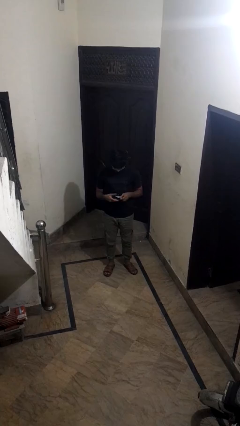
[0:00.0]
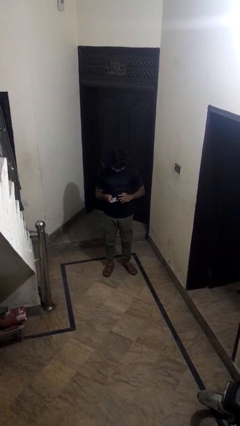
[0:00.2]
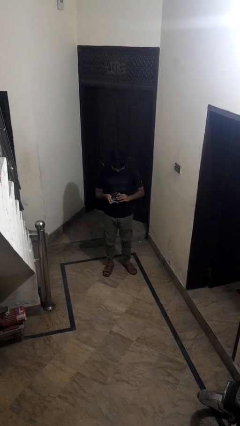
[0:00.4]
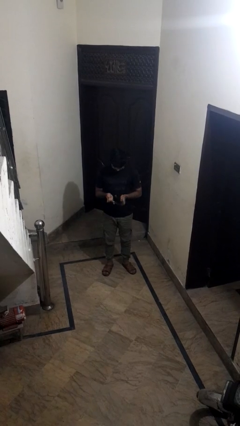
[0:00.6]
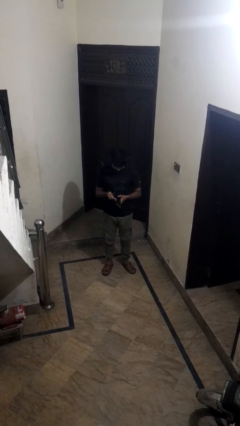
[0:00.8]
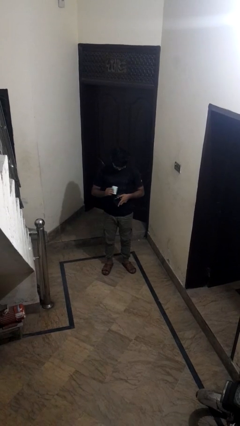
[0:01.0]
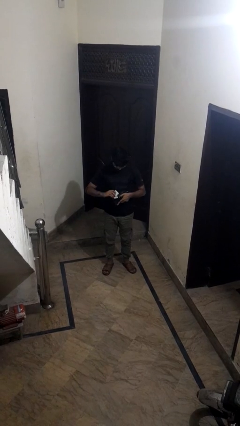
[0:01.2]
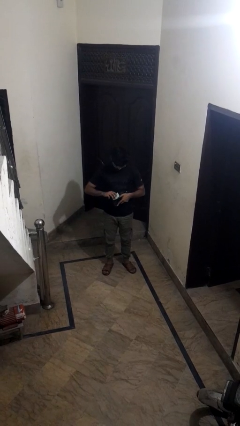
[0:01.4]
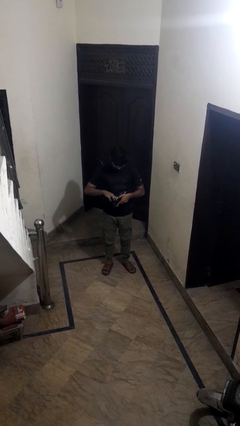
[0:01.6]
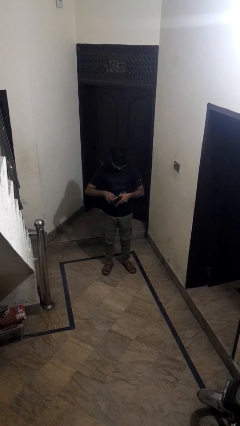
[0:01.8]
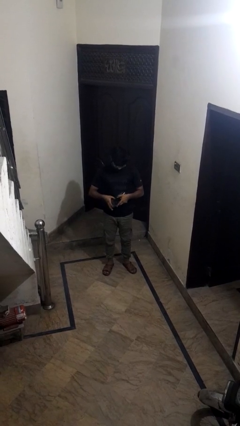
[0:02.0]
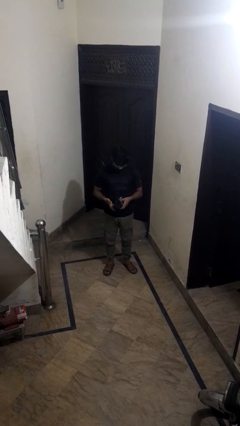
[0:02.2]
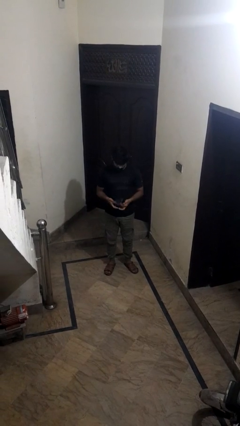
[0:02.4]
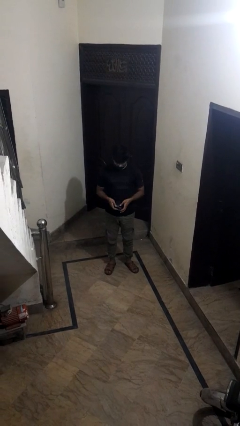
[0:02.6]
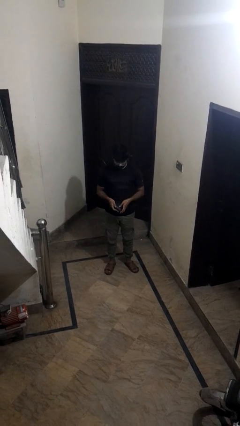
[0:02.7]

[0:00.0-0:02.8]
person puts object into purse

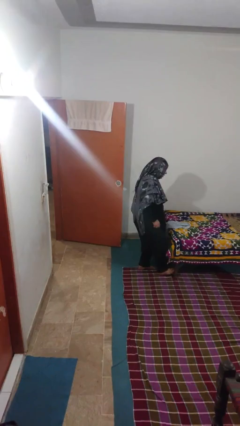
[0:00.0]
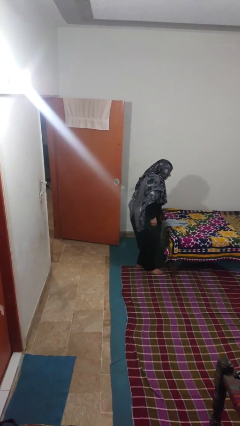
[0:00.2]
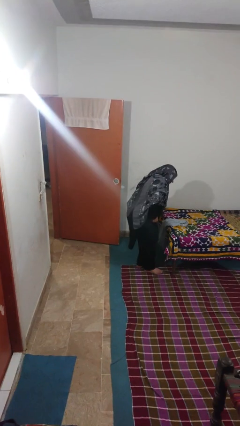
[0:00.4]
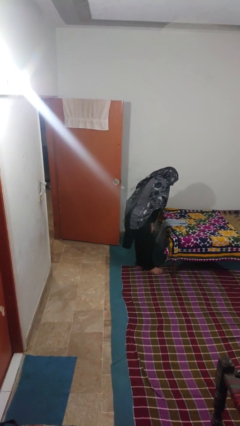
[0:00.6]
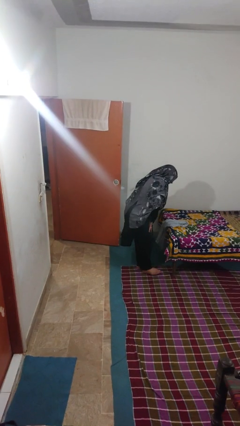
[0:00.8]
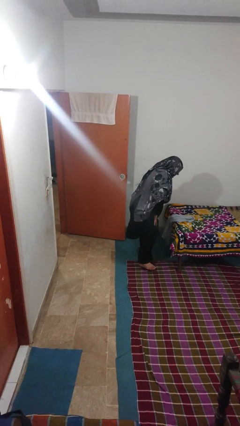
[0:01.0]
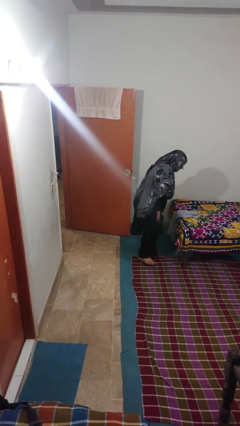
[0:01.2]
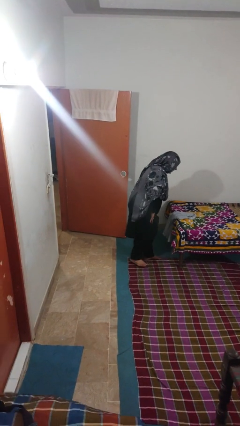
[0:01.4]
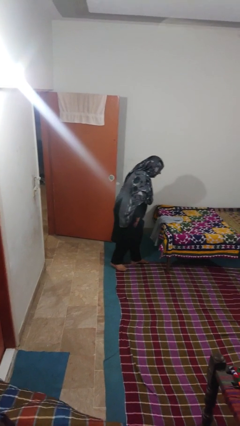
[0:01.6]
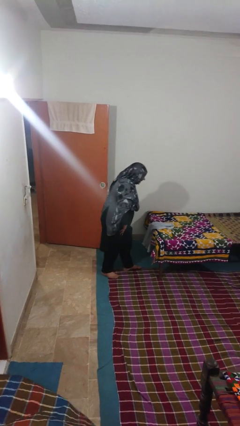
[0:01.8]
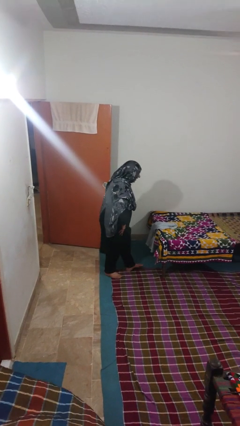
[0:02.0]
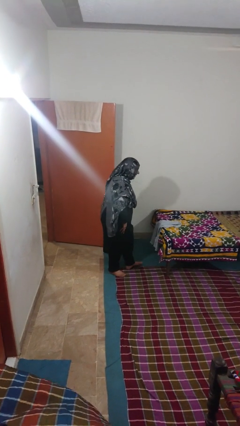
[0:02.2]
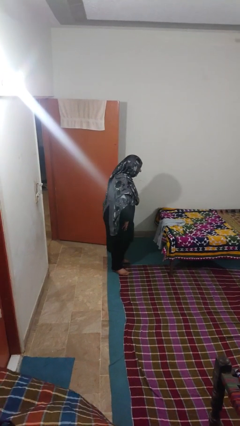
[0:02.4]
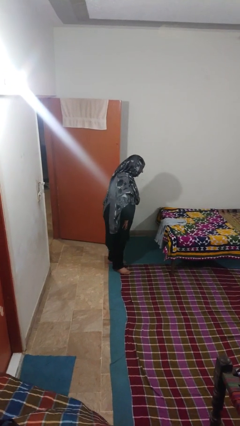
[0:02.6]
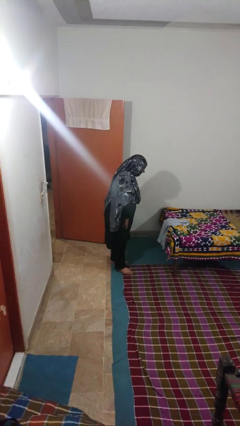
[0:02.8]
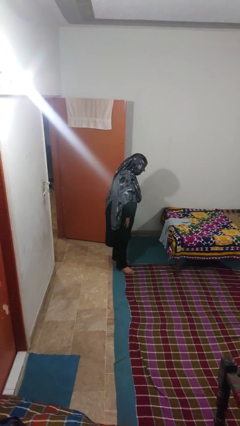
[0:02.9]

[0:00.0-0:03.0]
person stubs toe

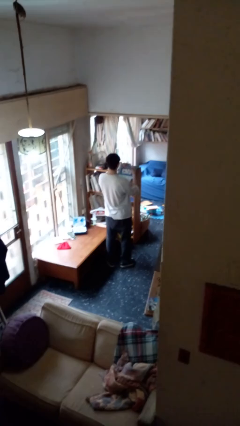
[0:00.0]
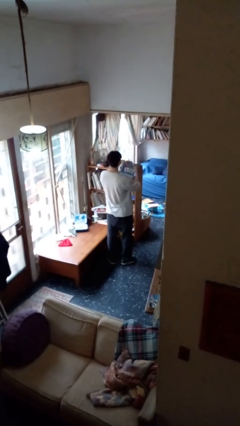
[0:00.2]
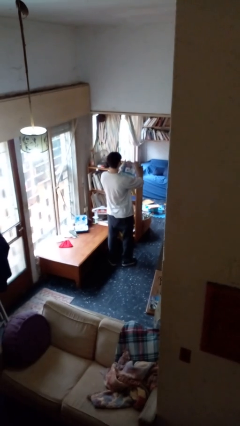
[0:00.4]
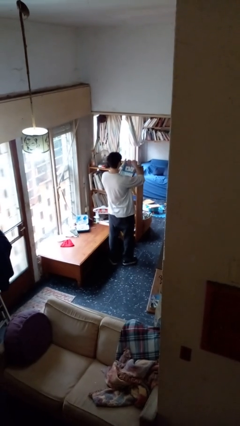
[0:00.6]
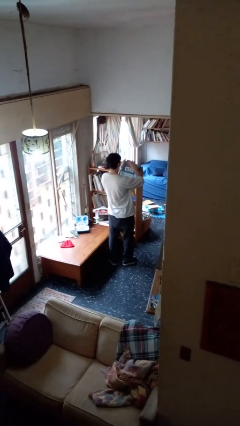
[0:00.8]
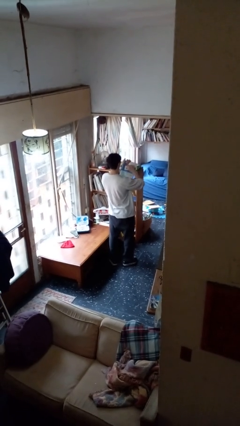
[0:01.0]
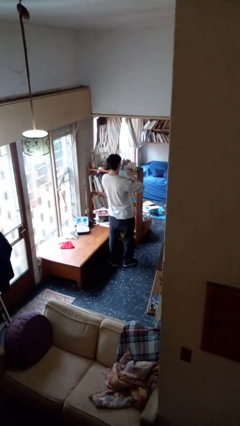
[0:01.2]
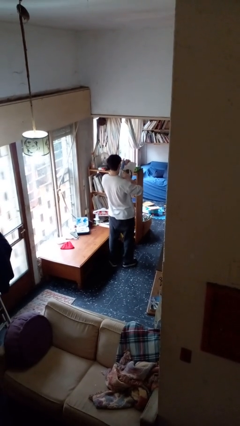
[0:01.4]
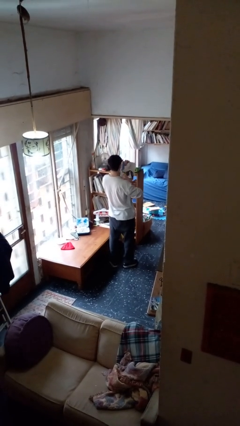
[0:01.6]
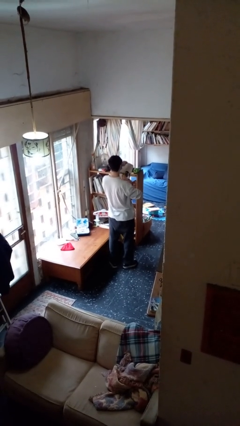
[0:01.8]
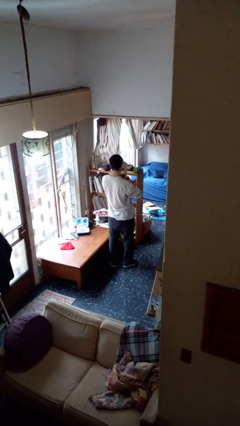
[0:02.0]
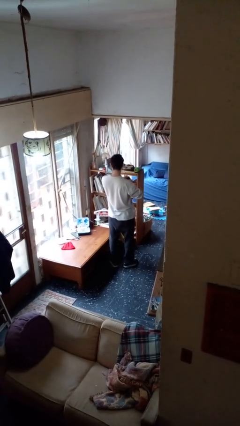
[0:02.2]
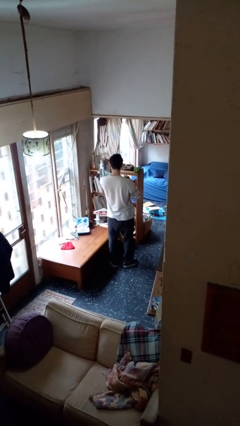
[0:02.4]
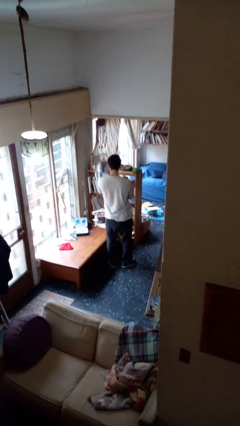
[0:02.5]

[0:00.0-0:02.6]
person tears paper

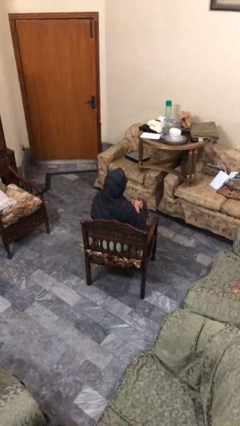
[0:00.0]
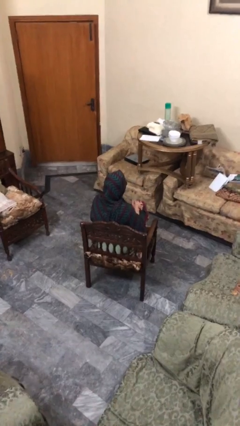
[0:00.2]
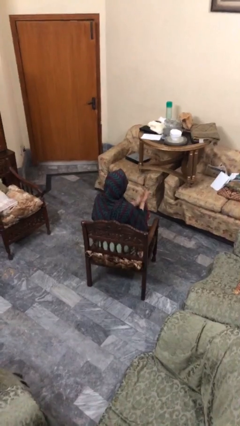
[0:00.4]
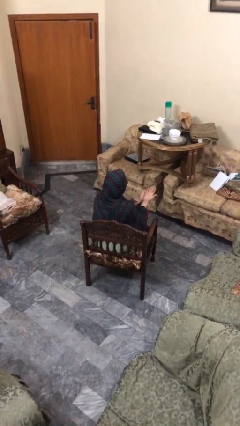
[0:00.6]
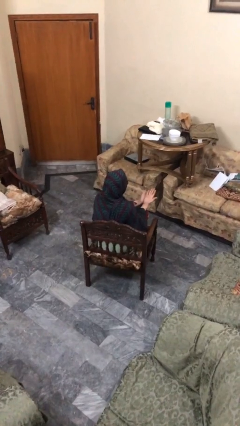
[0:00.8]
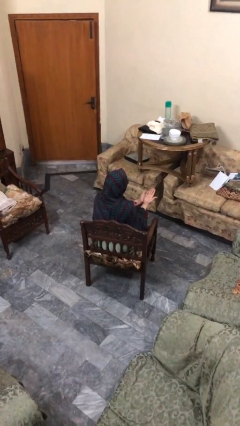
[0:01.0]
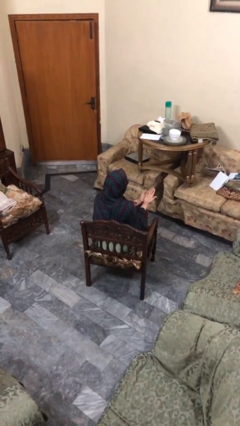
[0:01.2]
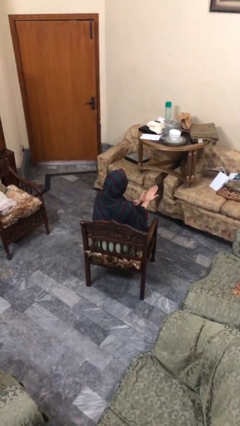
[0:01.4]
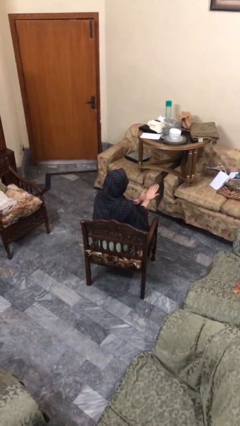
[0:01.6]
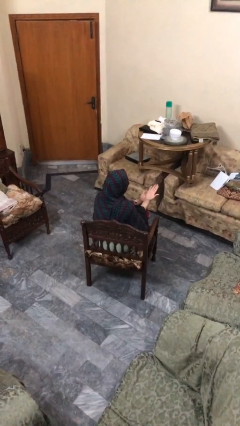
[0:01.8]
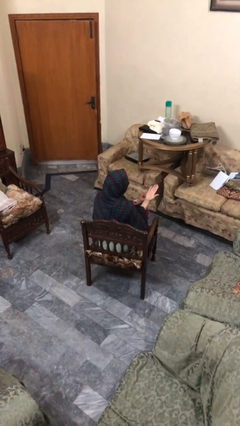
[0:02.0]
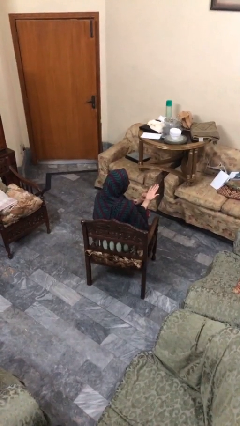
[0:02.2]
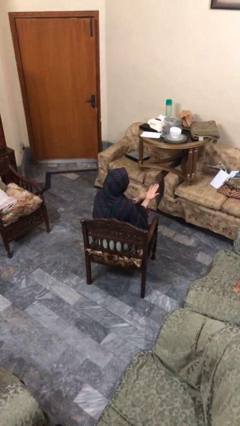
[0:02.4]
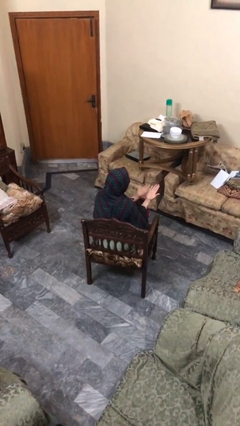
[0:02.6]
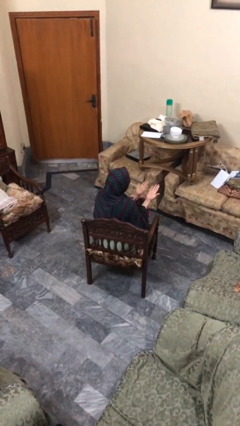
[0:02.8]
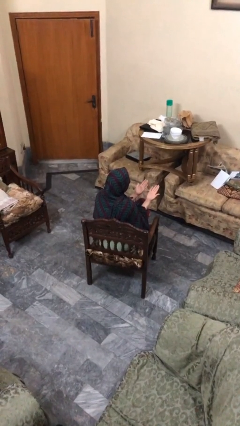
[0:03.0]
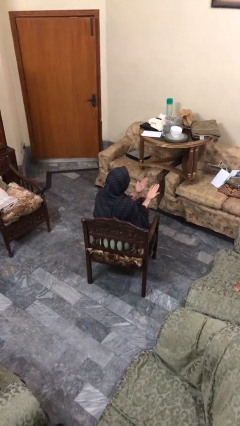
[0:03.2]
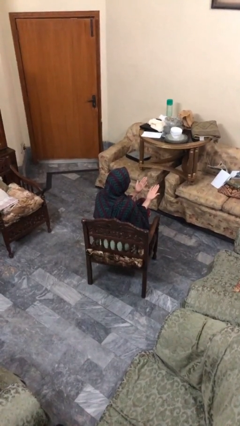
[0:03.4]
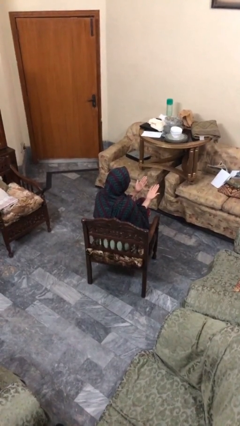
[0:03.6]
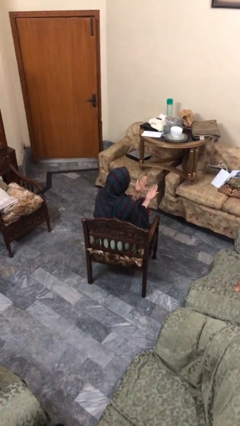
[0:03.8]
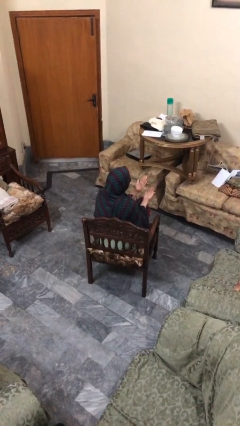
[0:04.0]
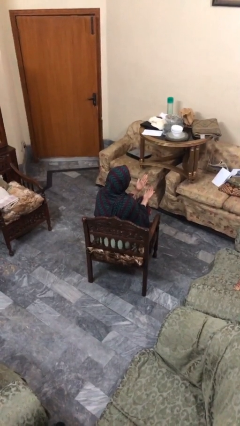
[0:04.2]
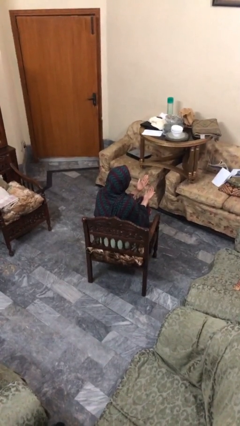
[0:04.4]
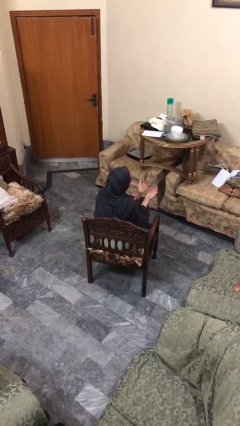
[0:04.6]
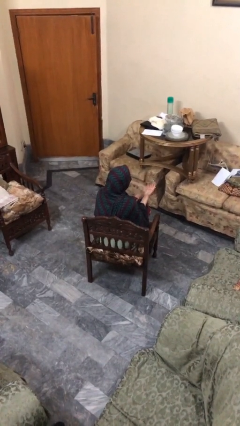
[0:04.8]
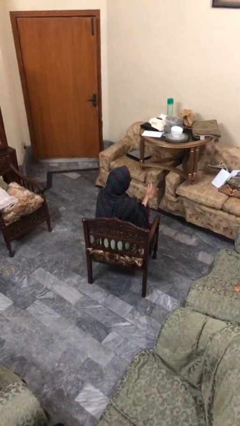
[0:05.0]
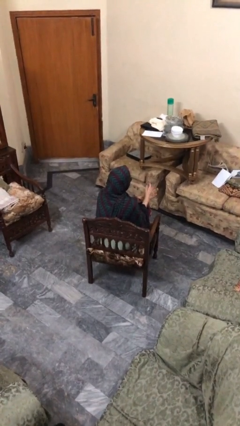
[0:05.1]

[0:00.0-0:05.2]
person looks at hands in lap

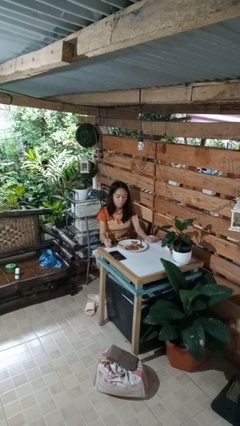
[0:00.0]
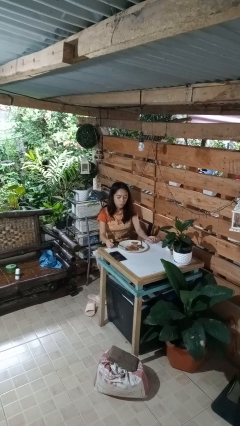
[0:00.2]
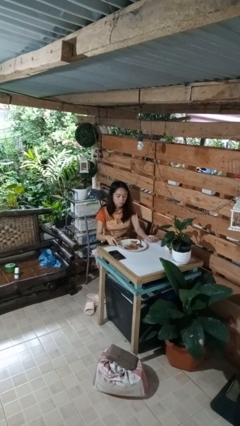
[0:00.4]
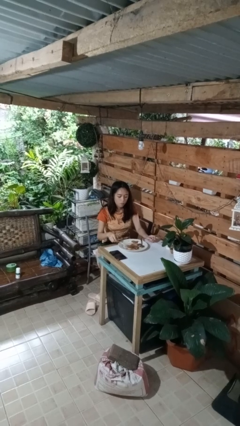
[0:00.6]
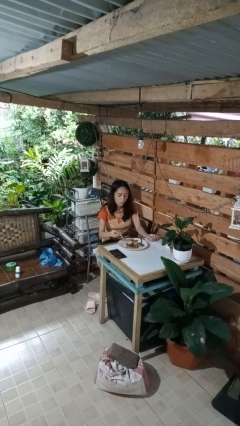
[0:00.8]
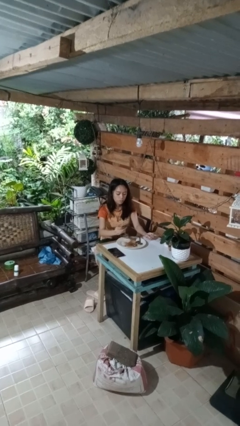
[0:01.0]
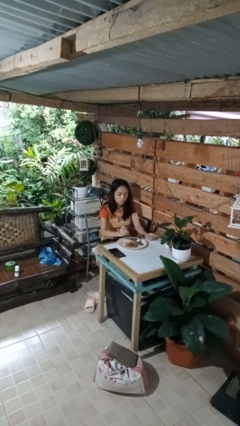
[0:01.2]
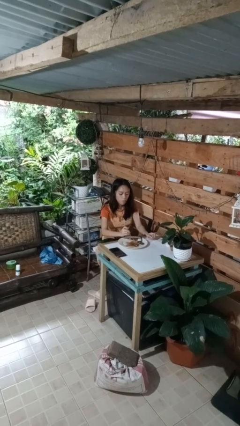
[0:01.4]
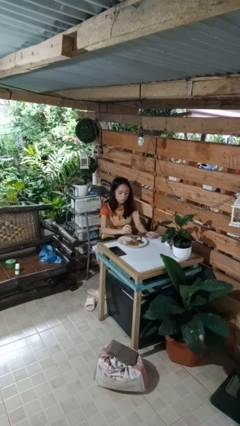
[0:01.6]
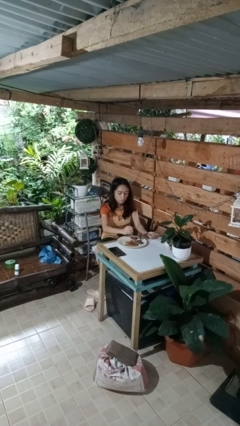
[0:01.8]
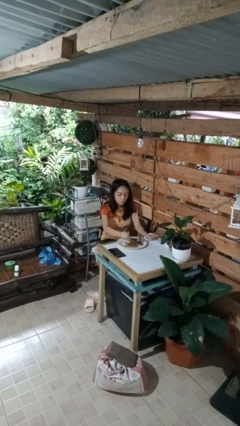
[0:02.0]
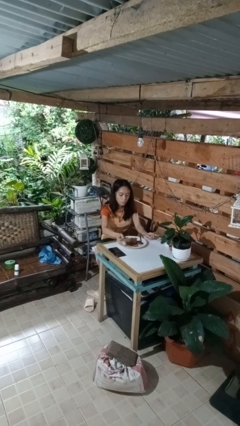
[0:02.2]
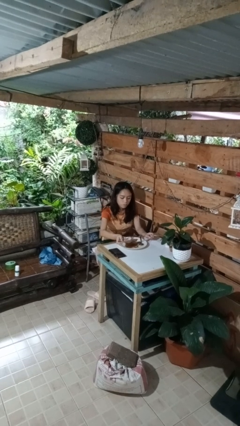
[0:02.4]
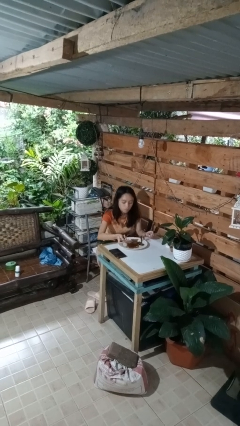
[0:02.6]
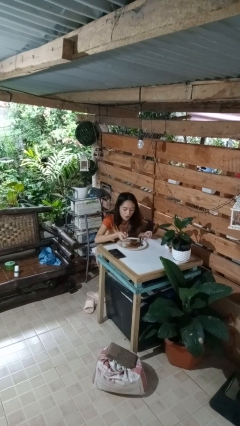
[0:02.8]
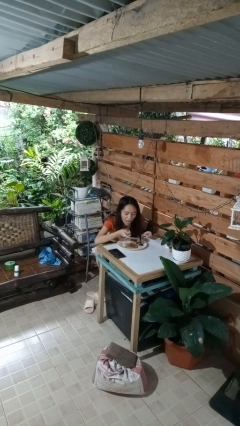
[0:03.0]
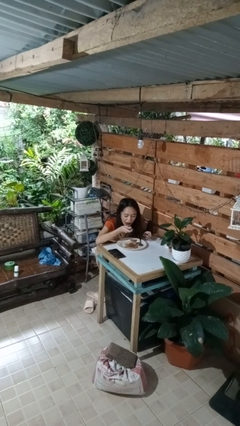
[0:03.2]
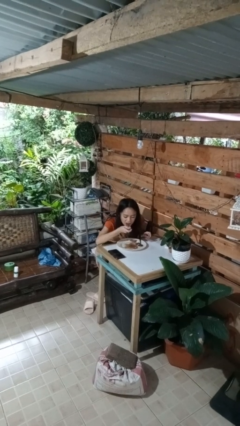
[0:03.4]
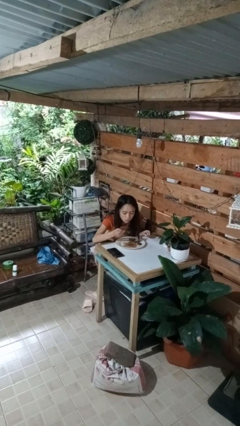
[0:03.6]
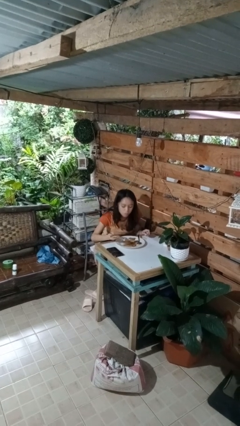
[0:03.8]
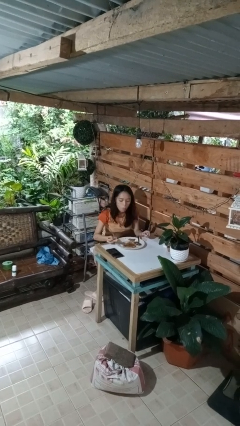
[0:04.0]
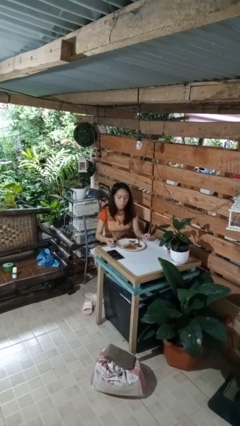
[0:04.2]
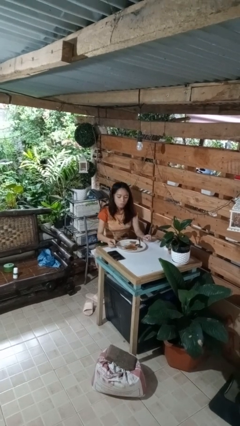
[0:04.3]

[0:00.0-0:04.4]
person eats with utensil
